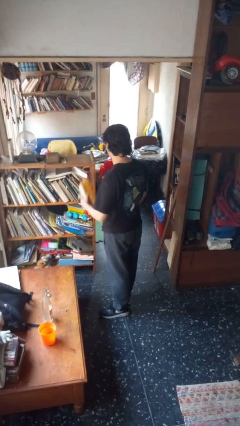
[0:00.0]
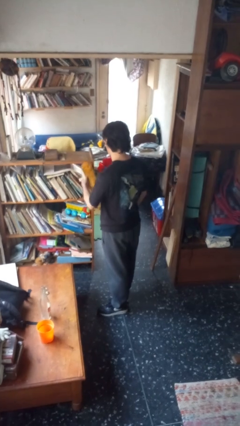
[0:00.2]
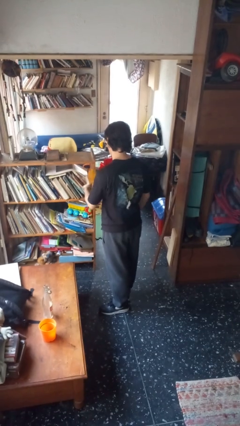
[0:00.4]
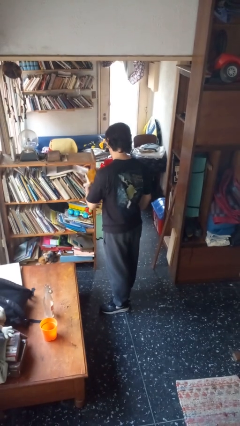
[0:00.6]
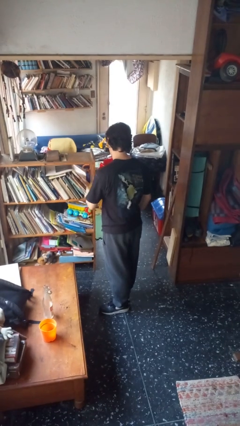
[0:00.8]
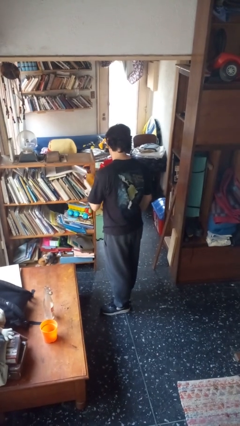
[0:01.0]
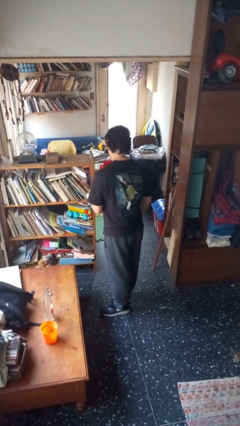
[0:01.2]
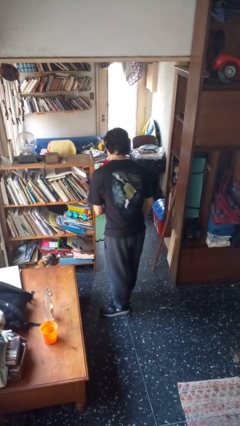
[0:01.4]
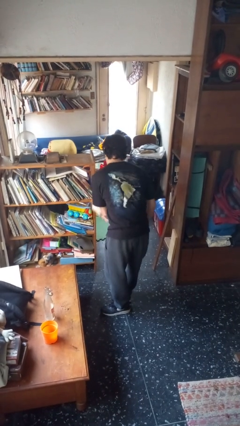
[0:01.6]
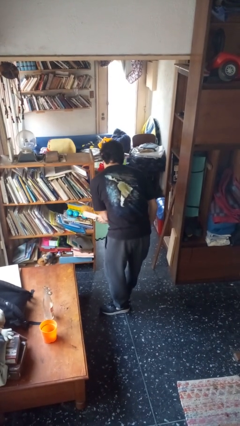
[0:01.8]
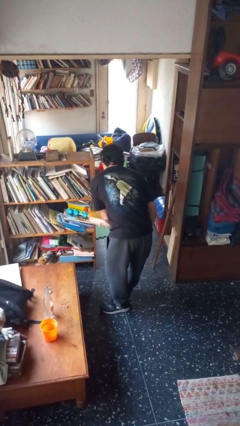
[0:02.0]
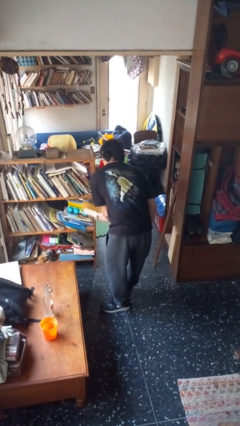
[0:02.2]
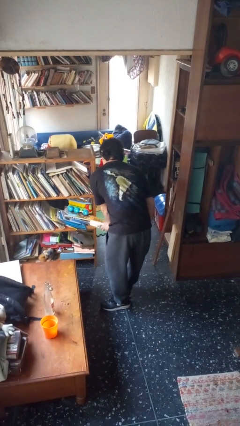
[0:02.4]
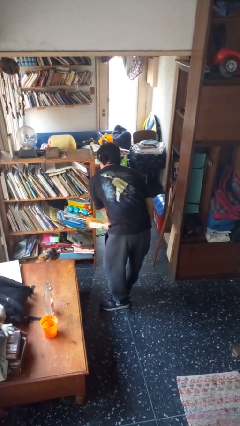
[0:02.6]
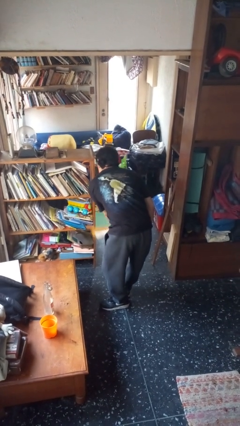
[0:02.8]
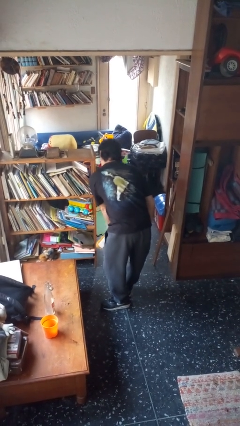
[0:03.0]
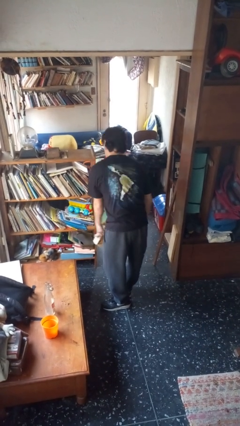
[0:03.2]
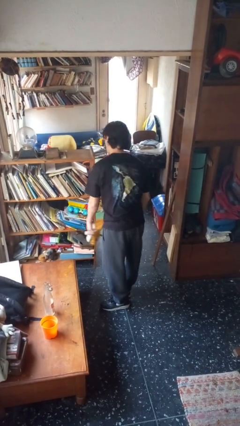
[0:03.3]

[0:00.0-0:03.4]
person dusts furniture

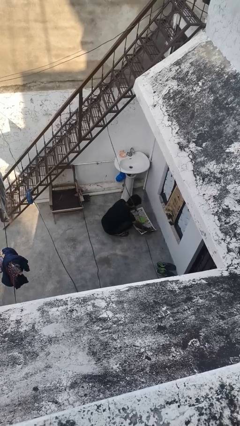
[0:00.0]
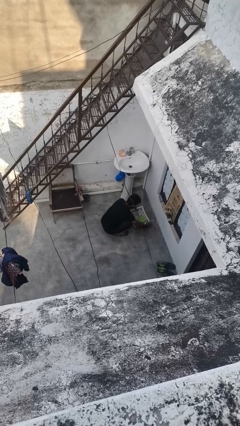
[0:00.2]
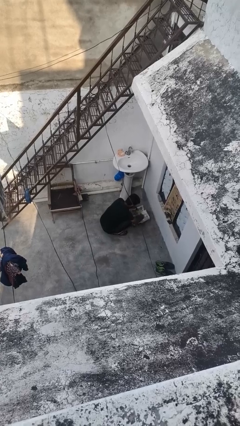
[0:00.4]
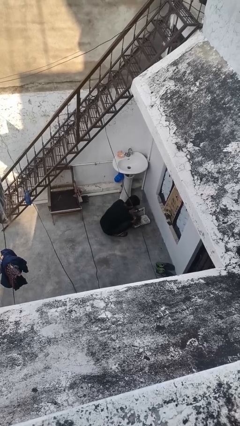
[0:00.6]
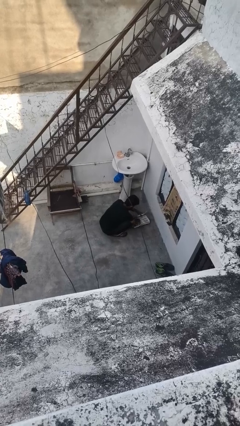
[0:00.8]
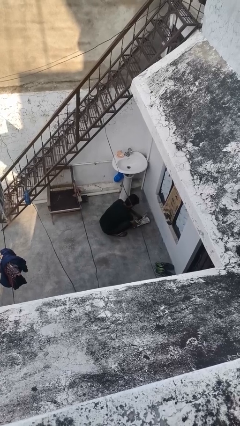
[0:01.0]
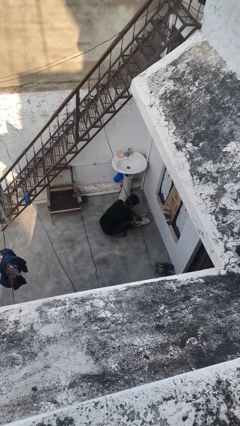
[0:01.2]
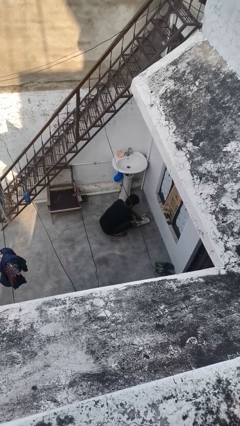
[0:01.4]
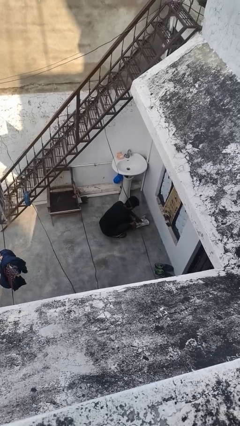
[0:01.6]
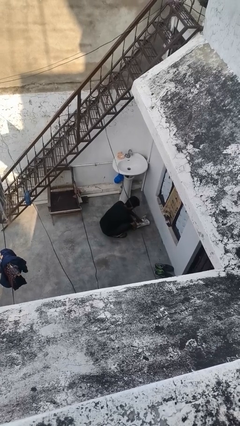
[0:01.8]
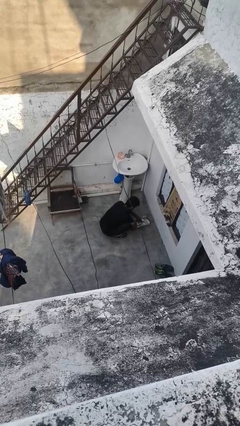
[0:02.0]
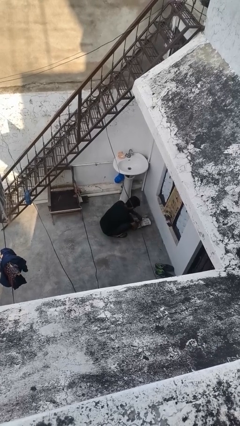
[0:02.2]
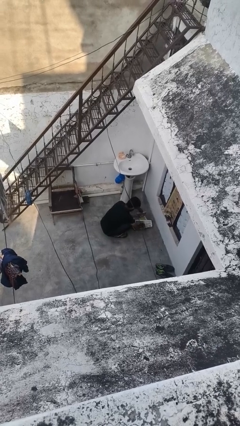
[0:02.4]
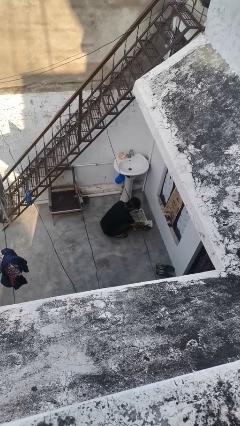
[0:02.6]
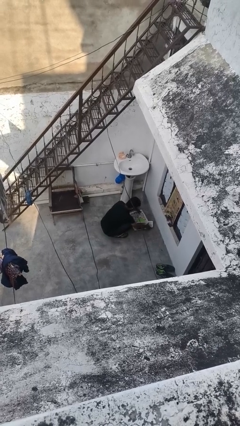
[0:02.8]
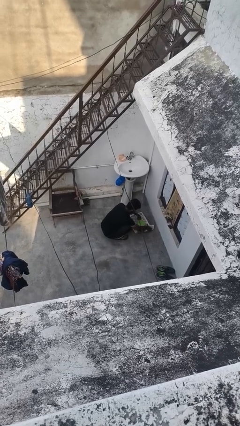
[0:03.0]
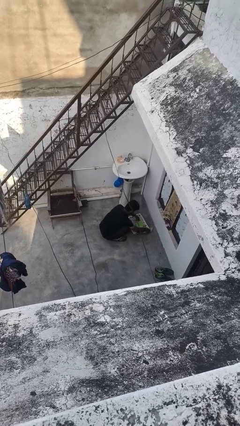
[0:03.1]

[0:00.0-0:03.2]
person wraps box

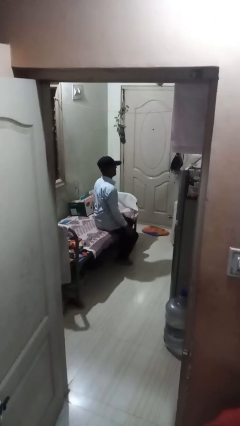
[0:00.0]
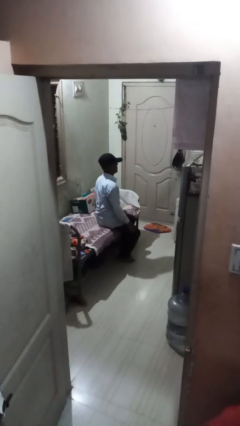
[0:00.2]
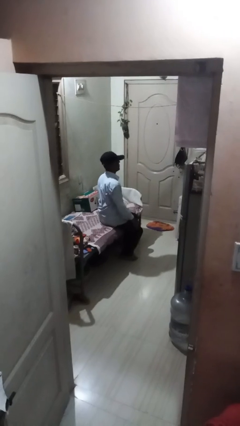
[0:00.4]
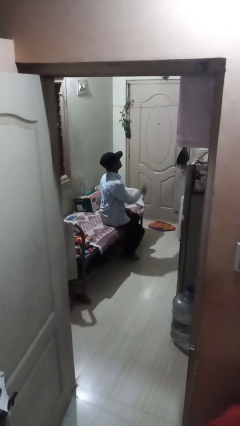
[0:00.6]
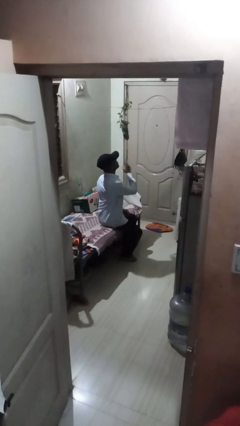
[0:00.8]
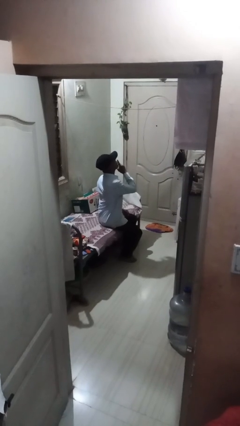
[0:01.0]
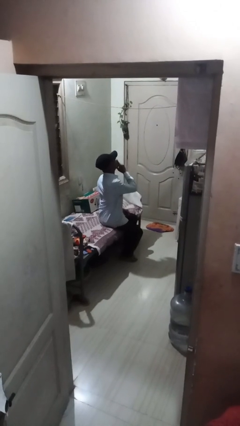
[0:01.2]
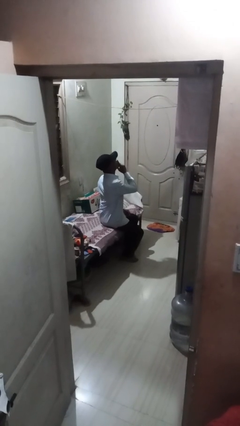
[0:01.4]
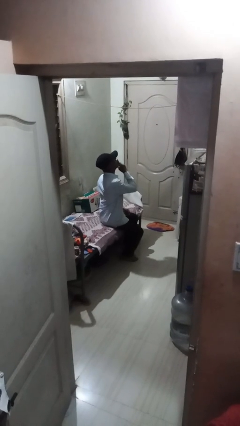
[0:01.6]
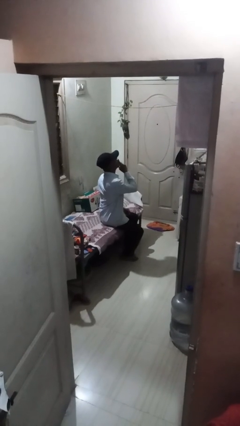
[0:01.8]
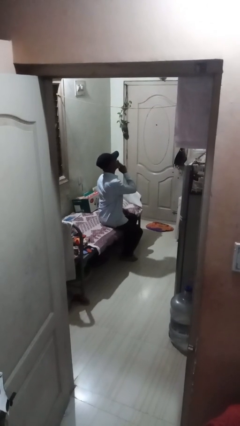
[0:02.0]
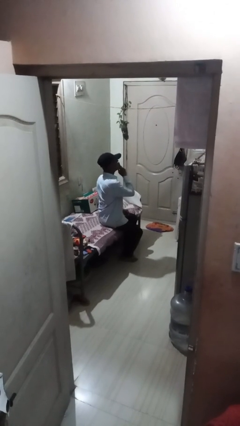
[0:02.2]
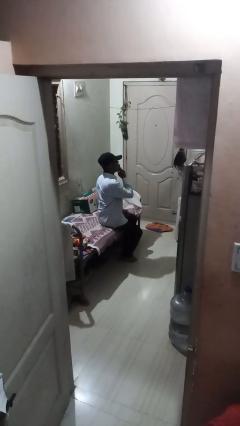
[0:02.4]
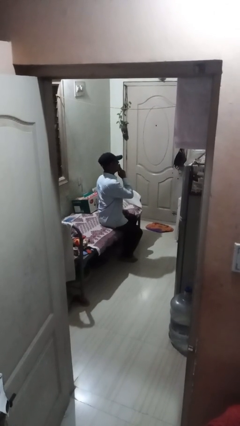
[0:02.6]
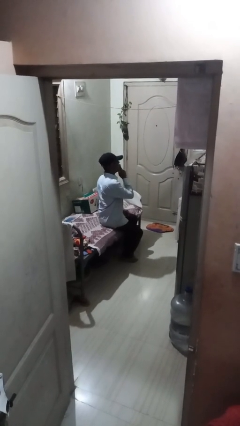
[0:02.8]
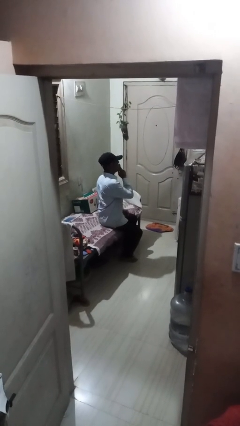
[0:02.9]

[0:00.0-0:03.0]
person gestures be quiet

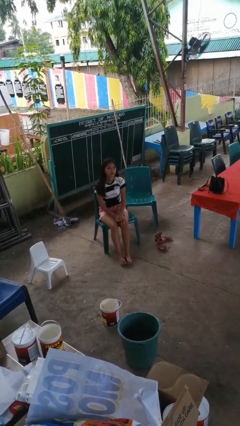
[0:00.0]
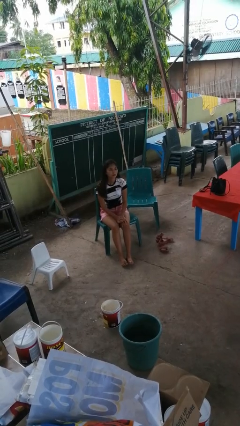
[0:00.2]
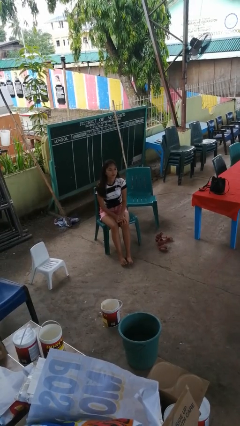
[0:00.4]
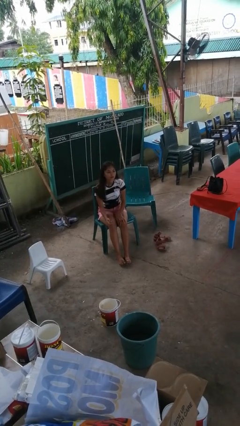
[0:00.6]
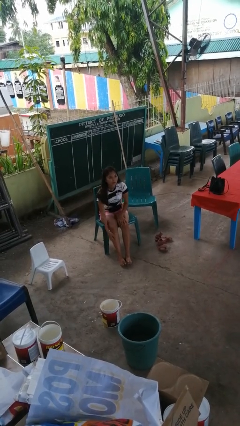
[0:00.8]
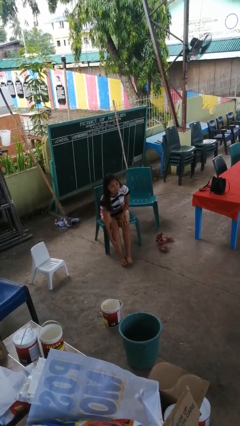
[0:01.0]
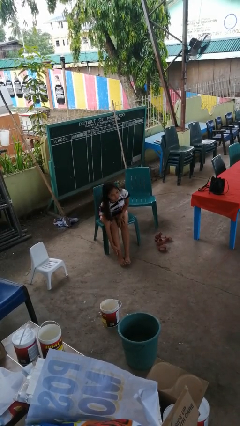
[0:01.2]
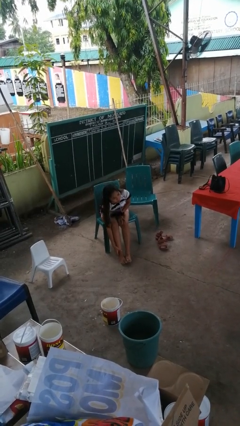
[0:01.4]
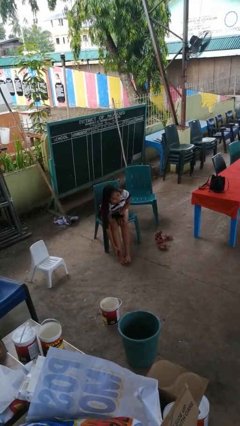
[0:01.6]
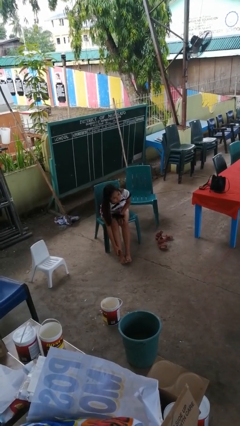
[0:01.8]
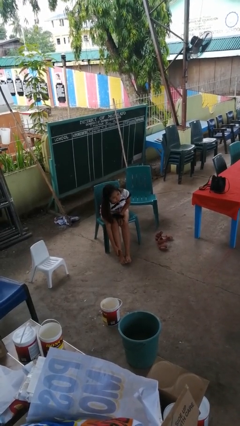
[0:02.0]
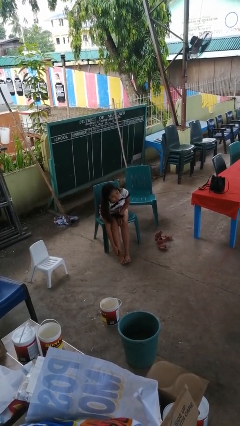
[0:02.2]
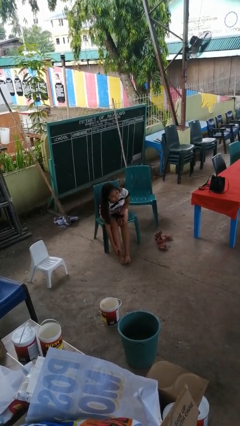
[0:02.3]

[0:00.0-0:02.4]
person rubs foot

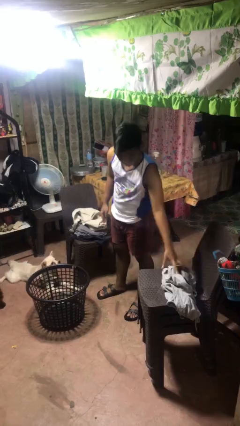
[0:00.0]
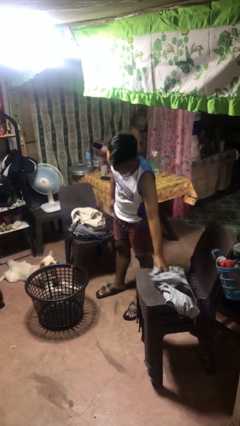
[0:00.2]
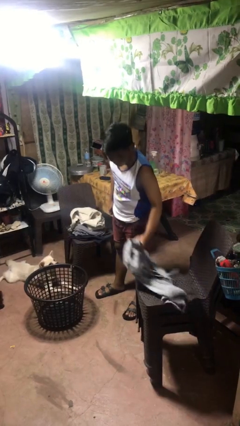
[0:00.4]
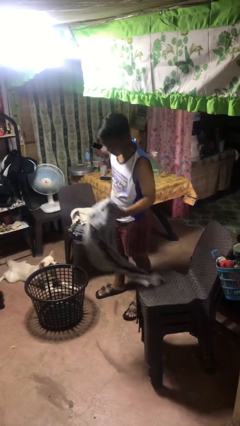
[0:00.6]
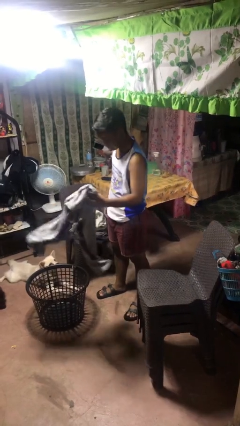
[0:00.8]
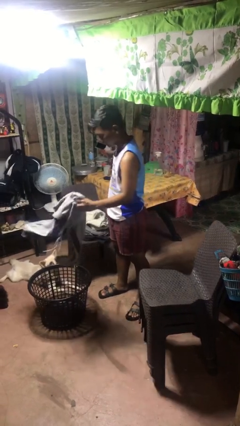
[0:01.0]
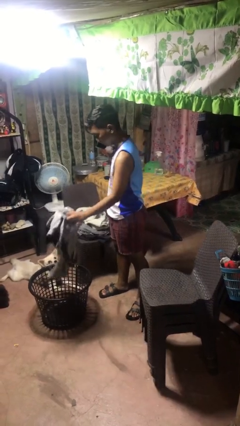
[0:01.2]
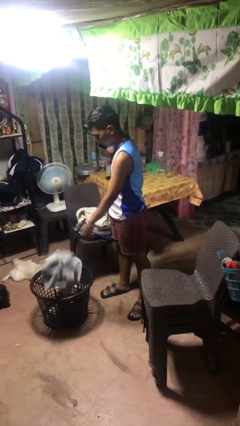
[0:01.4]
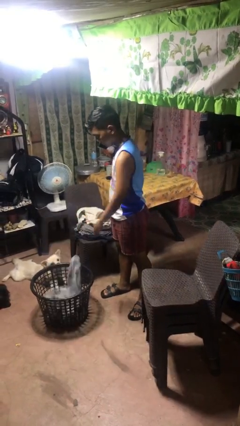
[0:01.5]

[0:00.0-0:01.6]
person puts object into basket

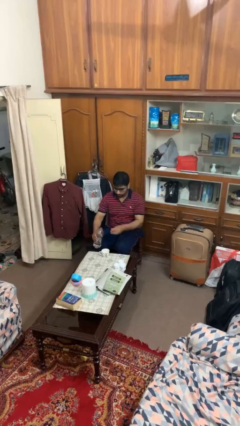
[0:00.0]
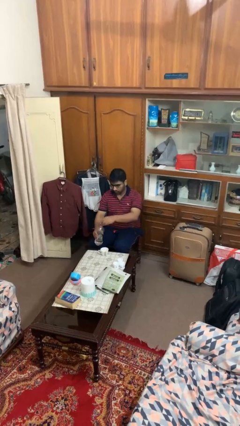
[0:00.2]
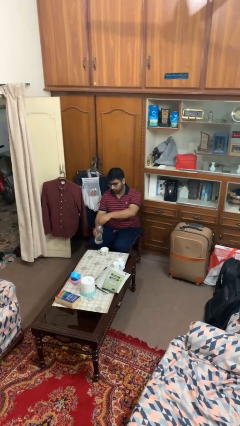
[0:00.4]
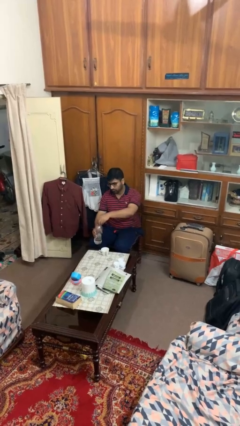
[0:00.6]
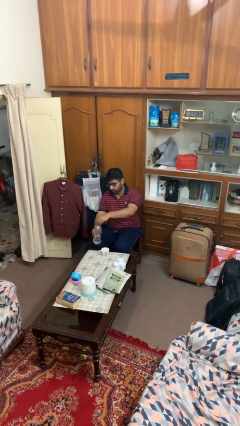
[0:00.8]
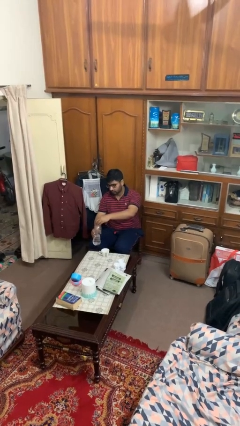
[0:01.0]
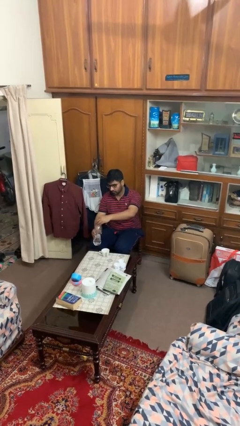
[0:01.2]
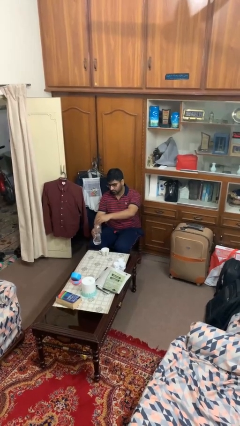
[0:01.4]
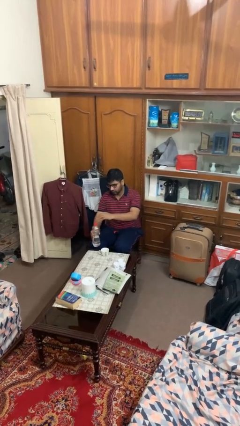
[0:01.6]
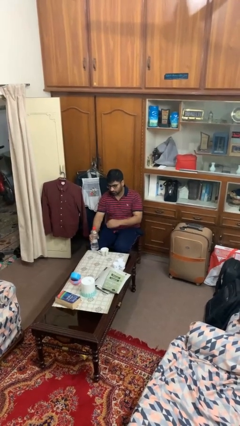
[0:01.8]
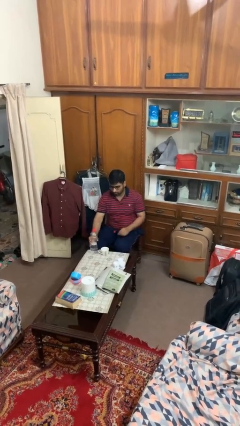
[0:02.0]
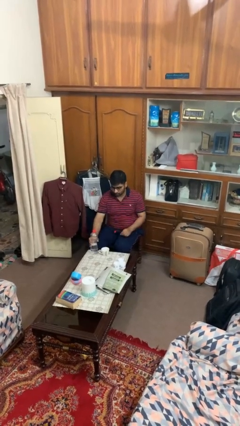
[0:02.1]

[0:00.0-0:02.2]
person screws lid to bottle

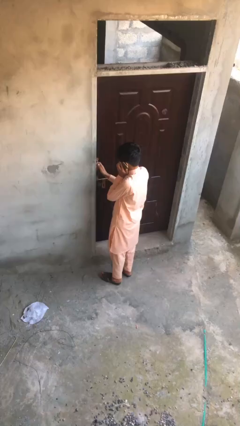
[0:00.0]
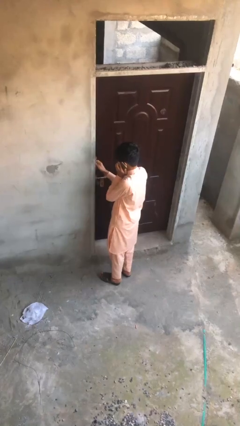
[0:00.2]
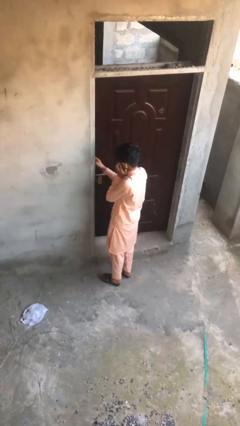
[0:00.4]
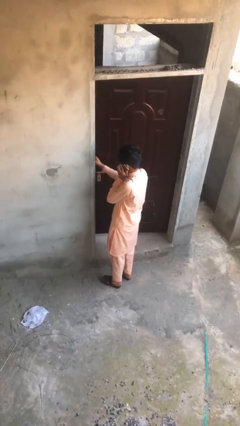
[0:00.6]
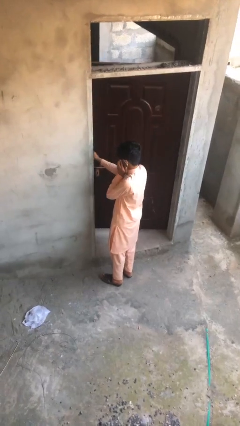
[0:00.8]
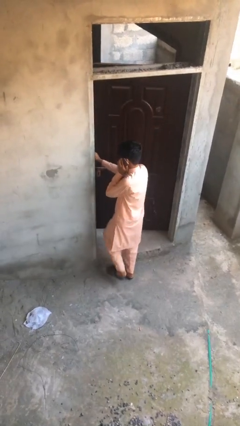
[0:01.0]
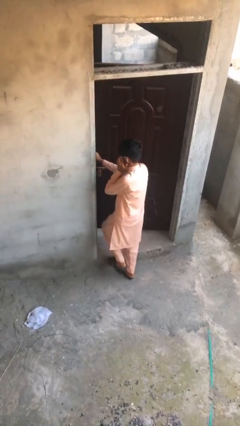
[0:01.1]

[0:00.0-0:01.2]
person opens facility door
